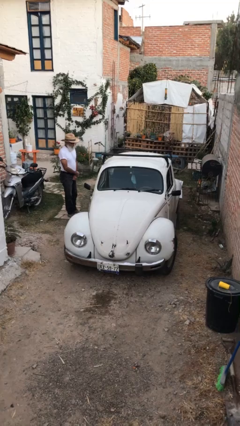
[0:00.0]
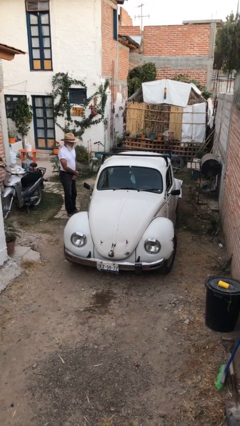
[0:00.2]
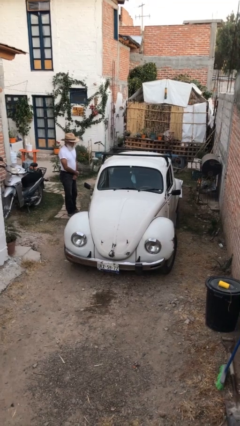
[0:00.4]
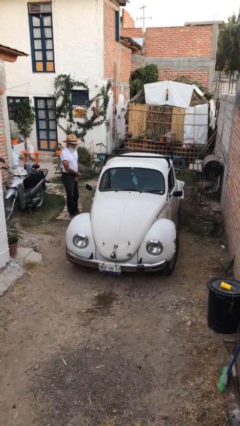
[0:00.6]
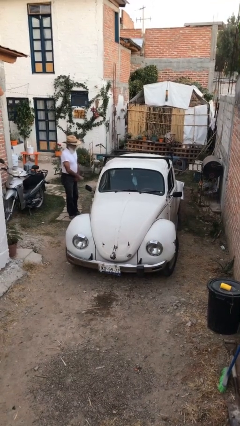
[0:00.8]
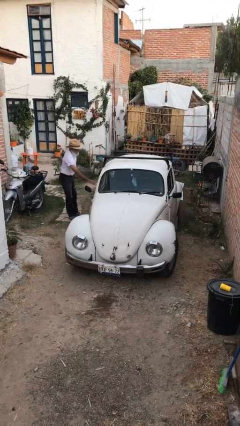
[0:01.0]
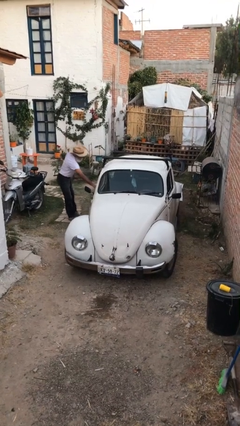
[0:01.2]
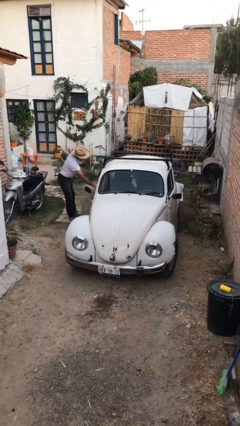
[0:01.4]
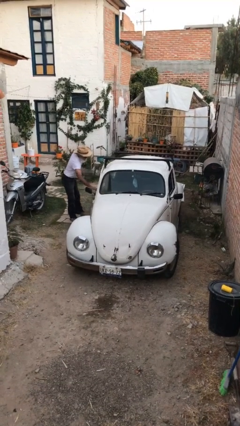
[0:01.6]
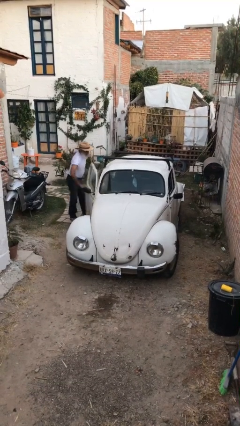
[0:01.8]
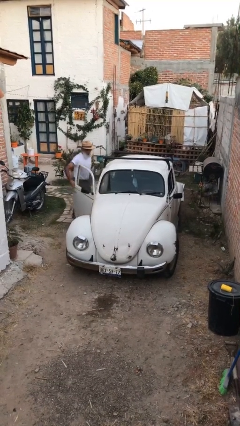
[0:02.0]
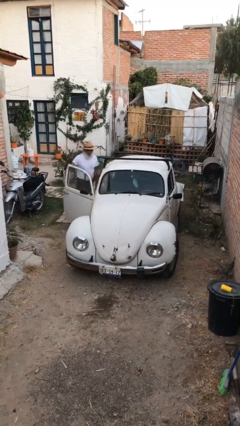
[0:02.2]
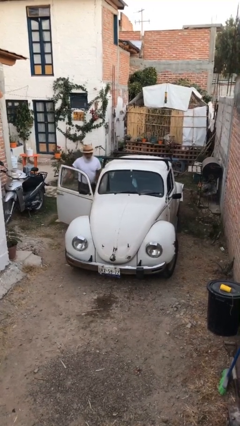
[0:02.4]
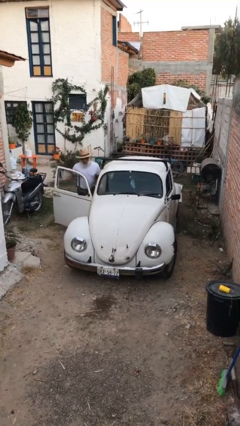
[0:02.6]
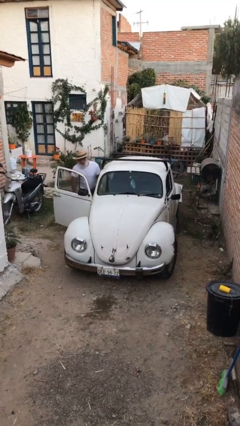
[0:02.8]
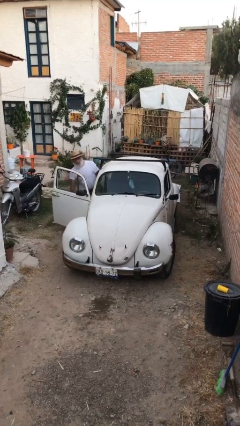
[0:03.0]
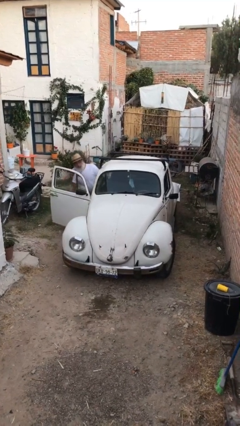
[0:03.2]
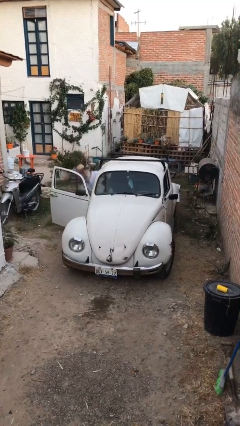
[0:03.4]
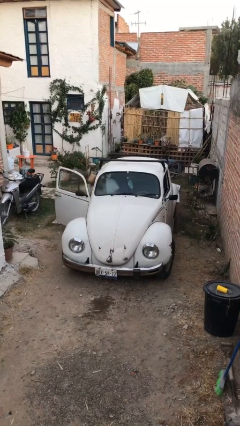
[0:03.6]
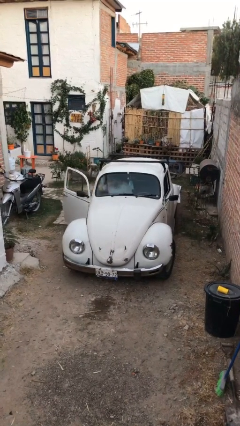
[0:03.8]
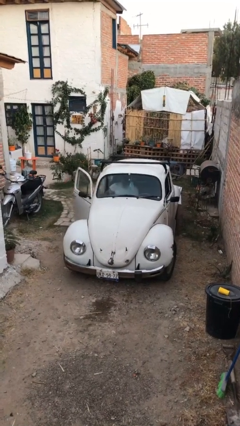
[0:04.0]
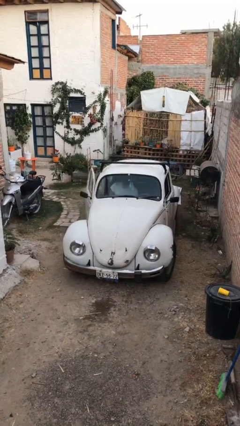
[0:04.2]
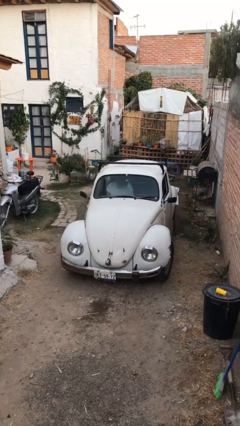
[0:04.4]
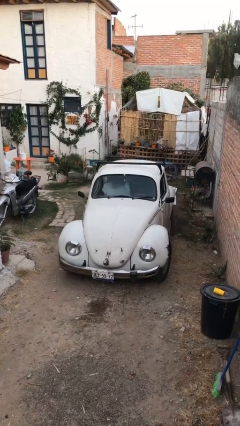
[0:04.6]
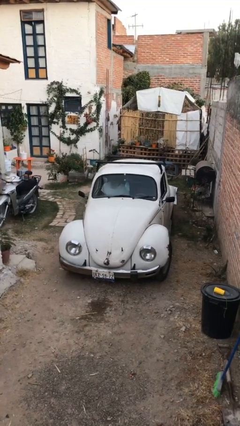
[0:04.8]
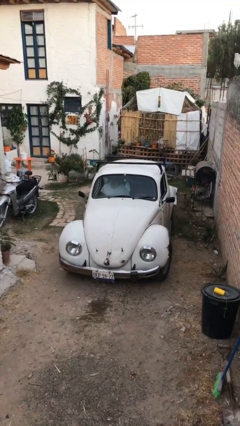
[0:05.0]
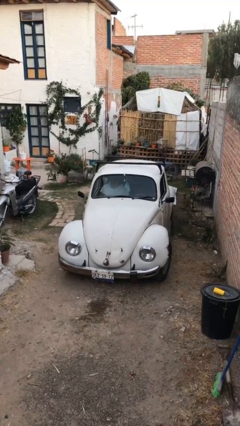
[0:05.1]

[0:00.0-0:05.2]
car picks up person

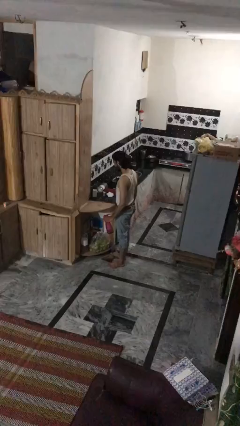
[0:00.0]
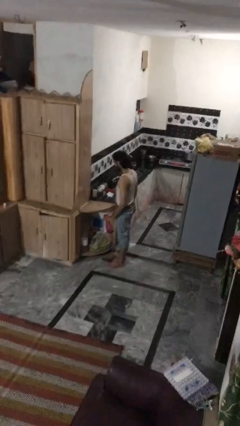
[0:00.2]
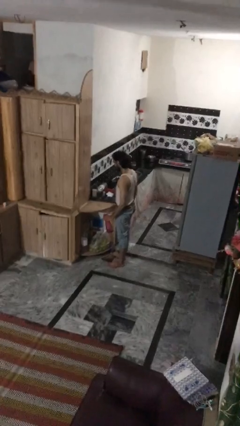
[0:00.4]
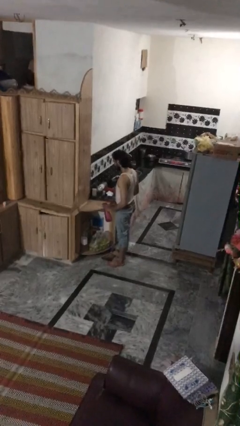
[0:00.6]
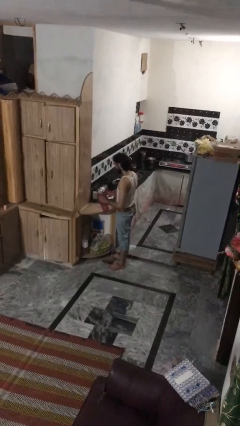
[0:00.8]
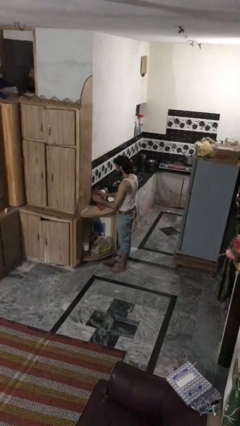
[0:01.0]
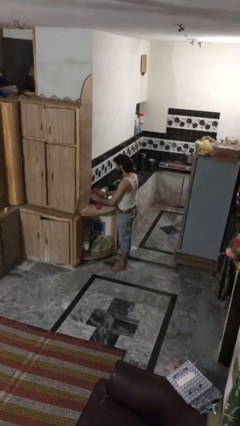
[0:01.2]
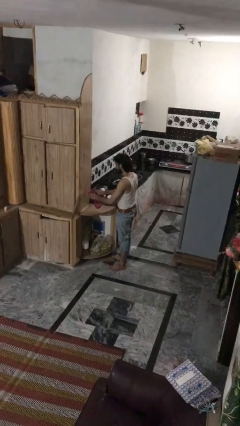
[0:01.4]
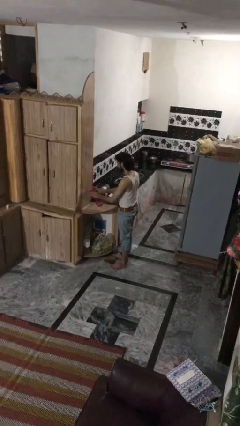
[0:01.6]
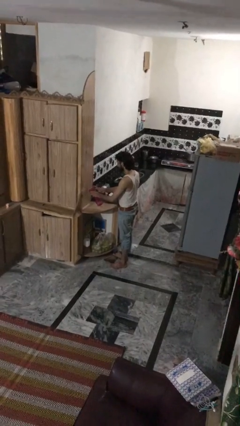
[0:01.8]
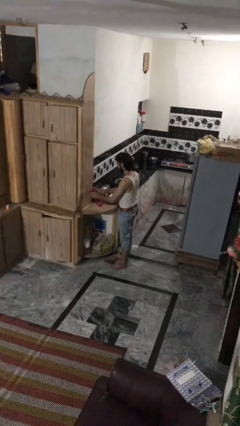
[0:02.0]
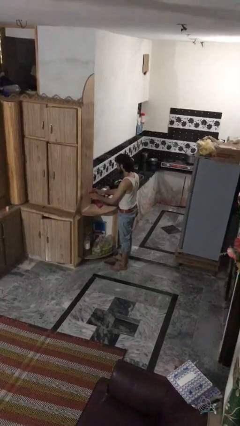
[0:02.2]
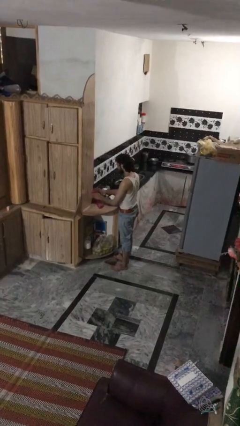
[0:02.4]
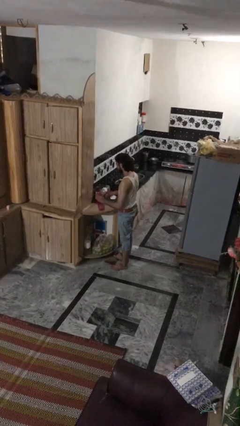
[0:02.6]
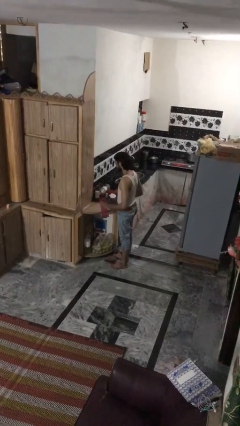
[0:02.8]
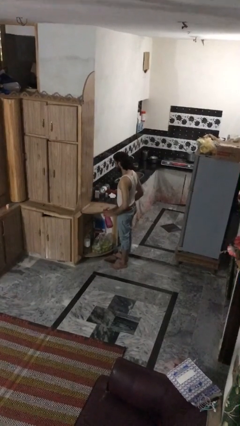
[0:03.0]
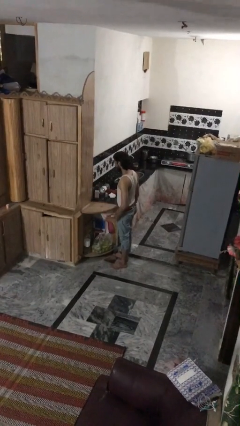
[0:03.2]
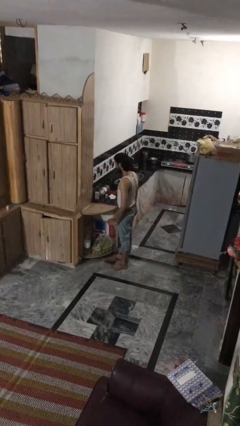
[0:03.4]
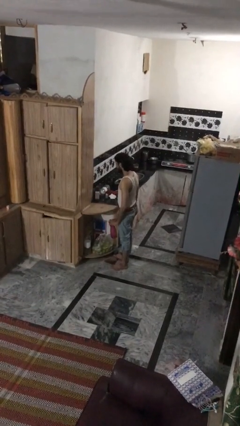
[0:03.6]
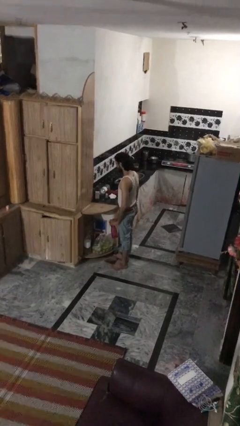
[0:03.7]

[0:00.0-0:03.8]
person sprays from bottle

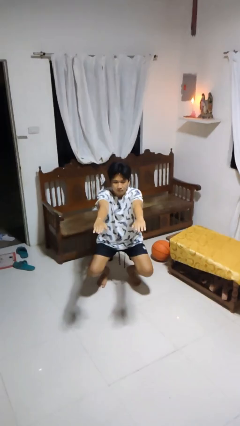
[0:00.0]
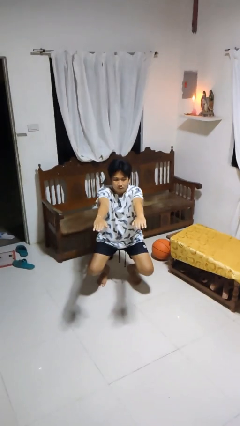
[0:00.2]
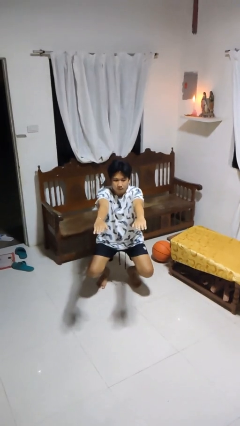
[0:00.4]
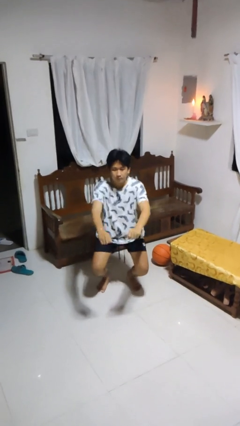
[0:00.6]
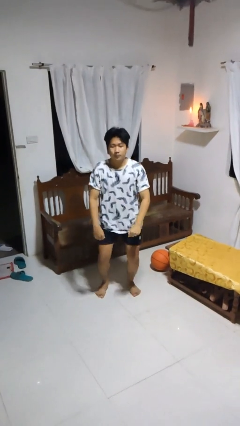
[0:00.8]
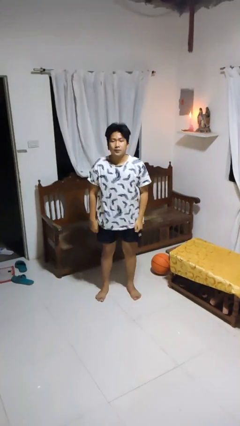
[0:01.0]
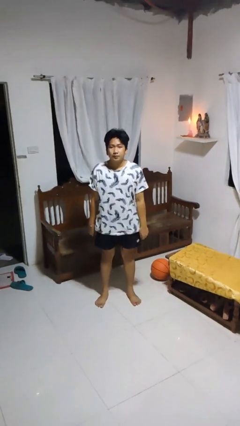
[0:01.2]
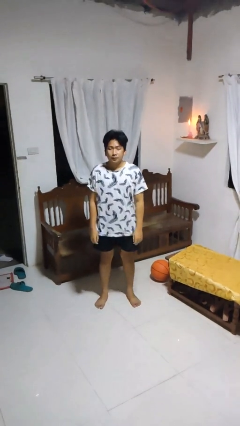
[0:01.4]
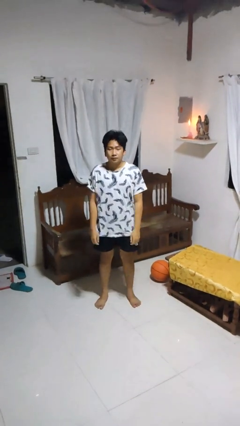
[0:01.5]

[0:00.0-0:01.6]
person stands up

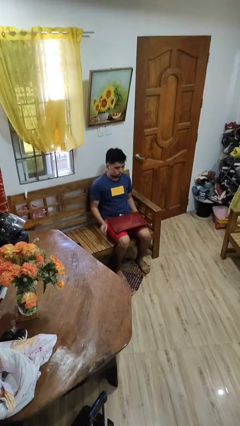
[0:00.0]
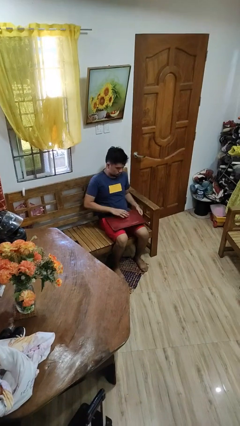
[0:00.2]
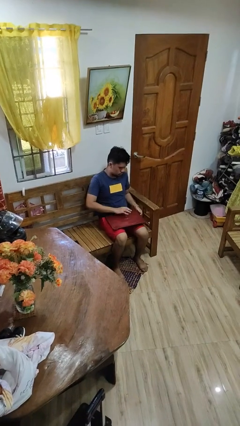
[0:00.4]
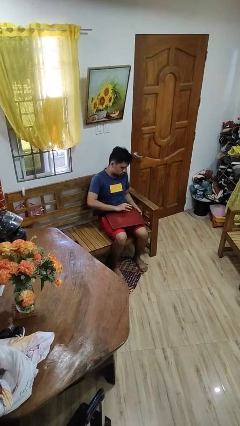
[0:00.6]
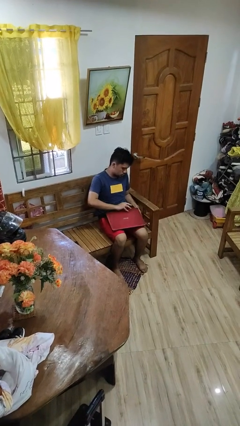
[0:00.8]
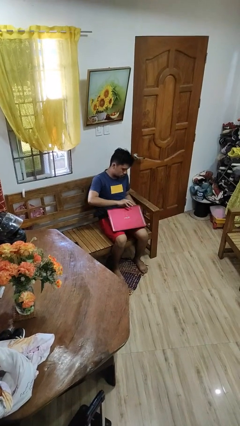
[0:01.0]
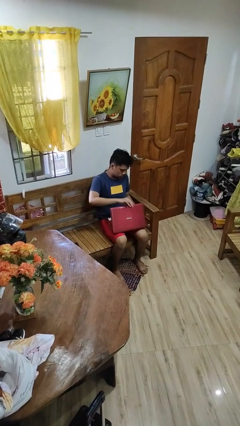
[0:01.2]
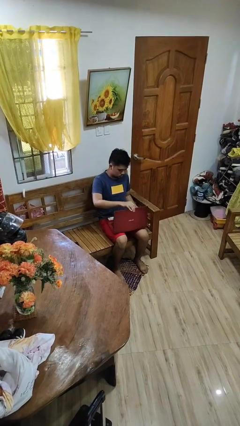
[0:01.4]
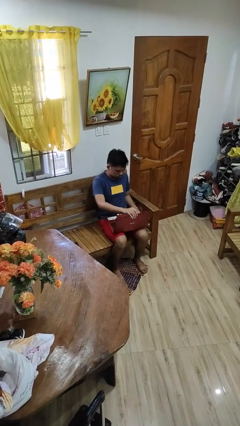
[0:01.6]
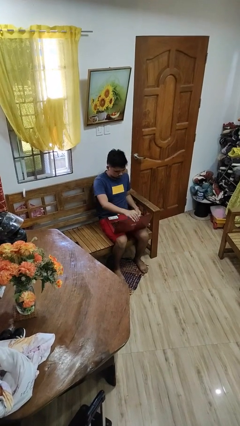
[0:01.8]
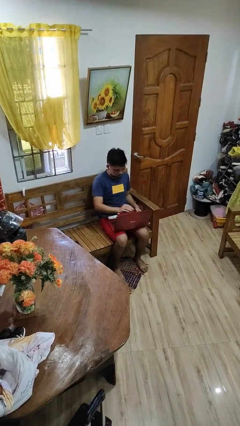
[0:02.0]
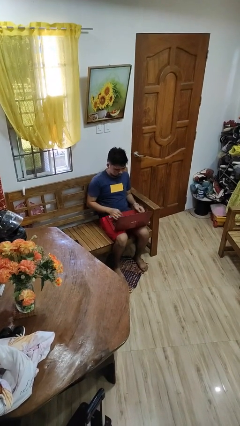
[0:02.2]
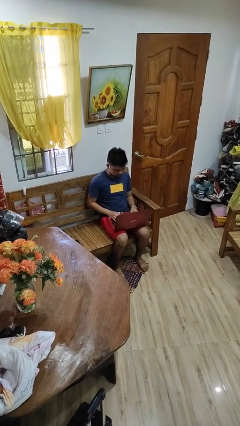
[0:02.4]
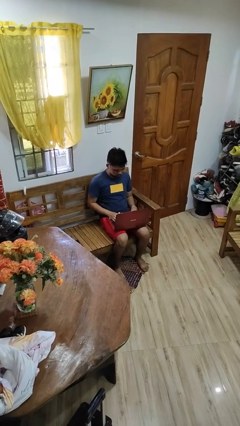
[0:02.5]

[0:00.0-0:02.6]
person opens laptop

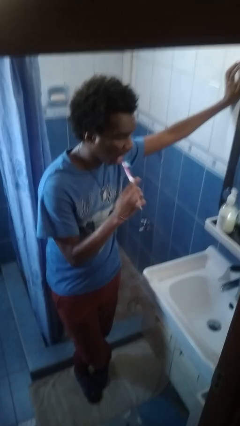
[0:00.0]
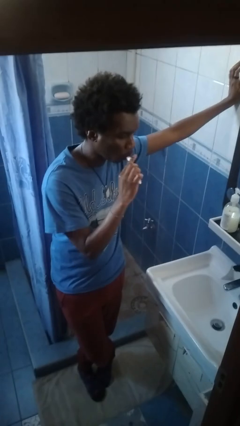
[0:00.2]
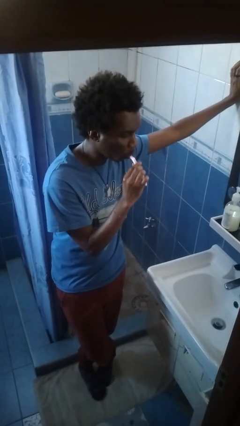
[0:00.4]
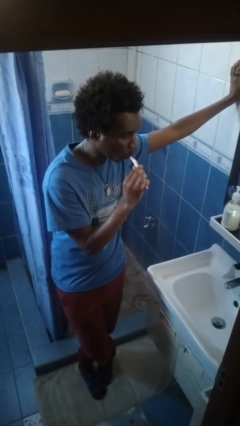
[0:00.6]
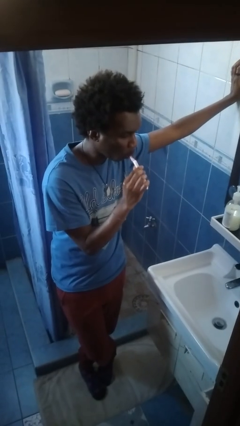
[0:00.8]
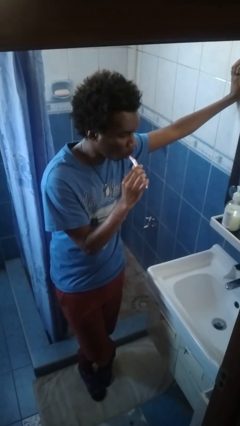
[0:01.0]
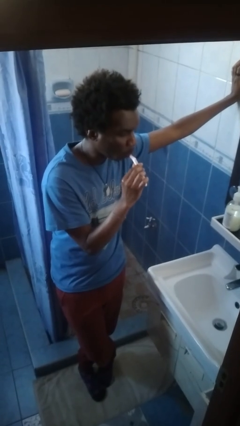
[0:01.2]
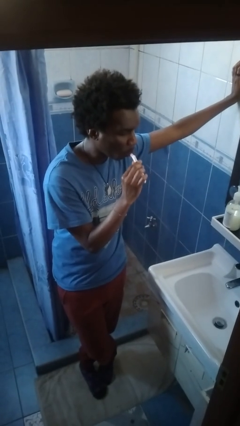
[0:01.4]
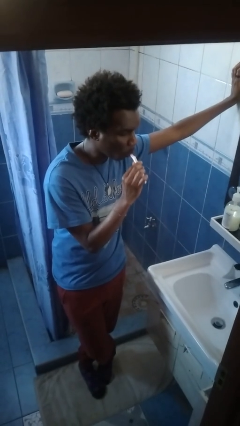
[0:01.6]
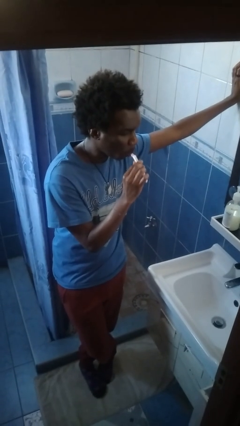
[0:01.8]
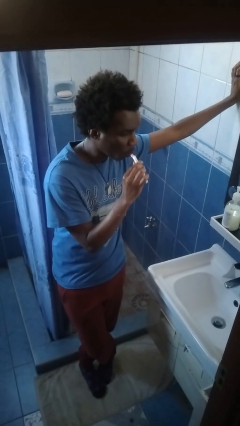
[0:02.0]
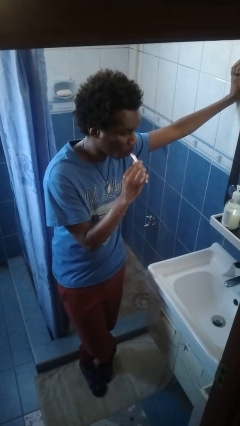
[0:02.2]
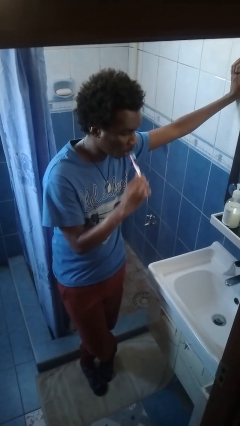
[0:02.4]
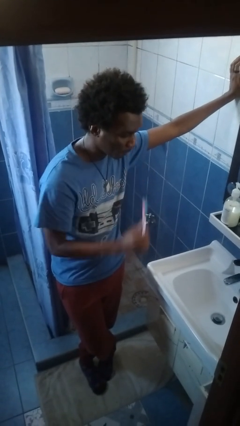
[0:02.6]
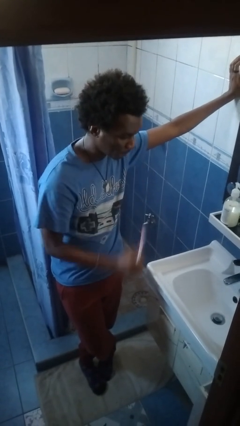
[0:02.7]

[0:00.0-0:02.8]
person brushes teeth

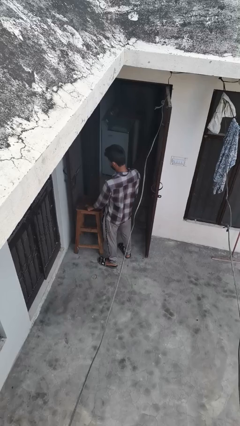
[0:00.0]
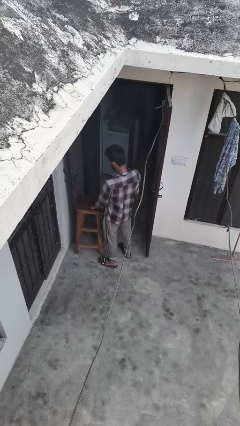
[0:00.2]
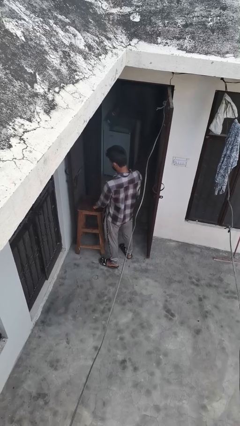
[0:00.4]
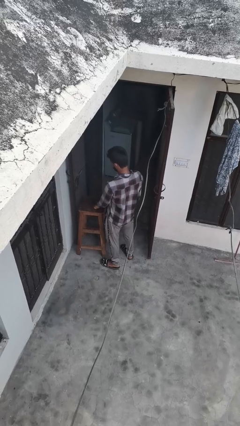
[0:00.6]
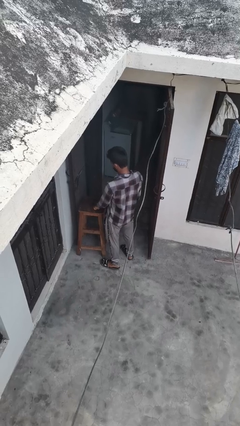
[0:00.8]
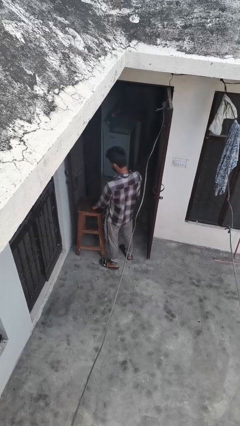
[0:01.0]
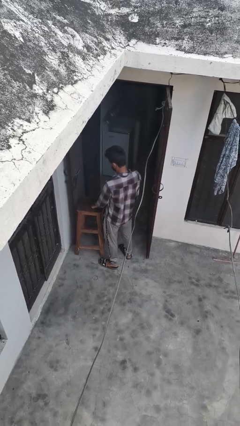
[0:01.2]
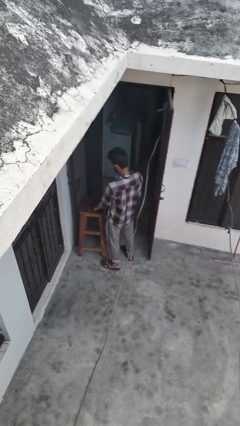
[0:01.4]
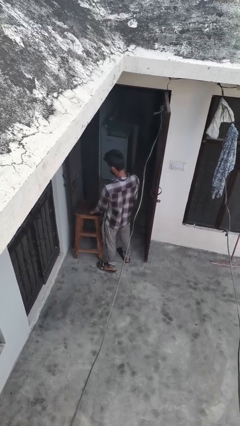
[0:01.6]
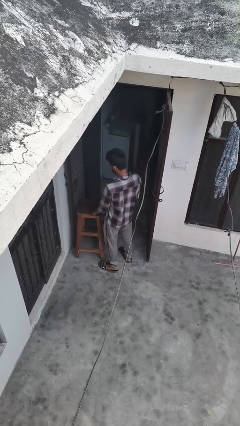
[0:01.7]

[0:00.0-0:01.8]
person taps object with finger
